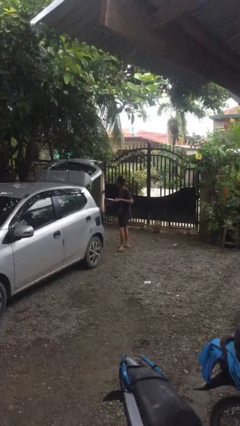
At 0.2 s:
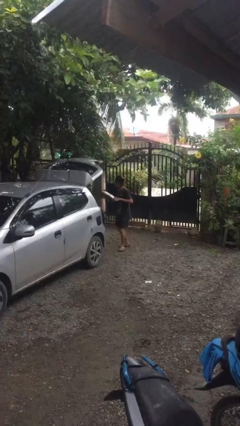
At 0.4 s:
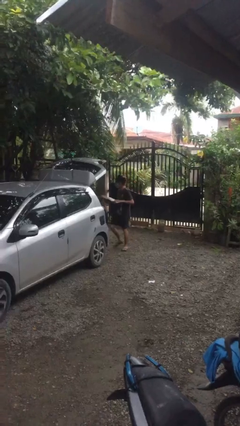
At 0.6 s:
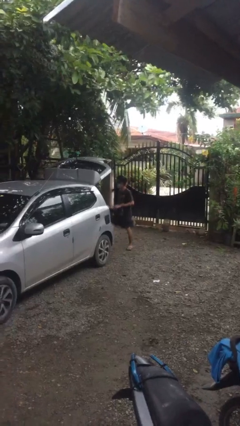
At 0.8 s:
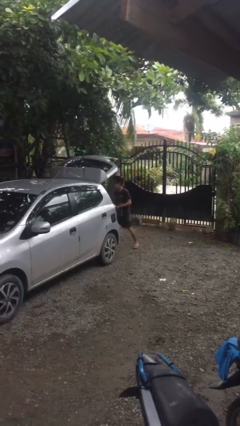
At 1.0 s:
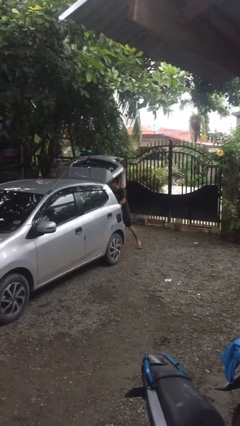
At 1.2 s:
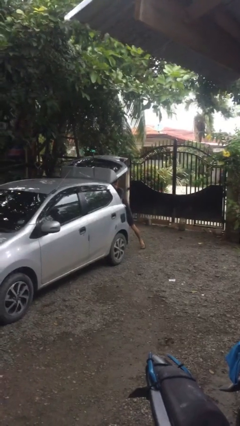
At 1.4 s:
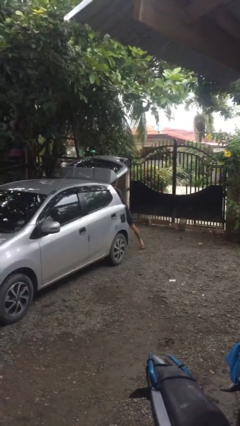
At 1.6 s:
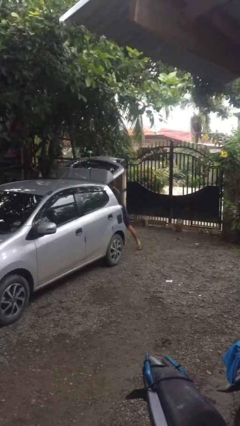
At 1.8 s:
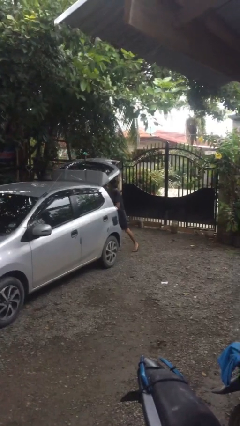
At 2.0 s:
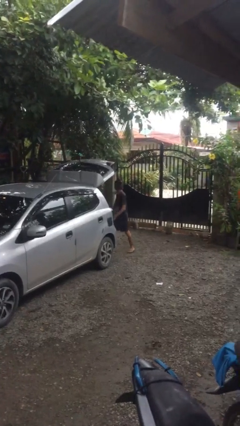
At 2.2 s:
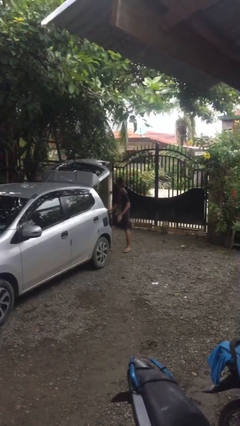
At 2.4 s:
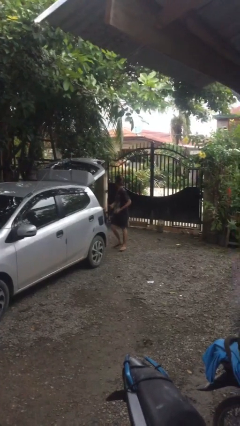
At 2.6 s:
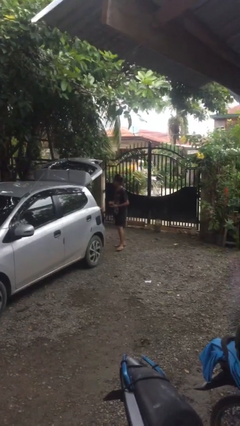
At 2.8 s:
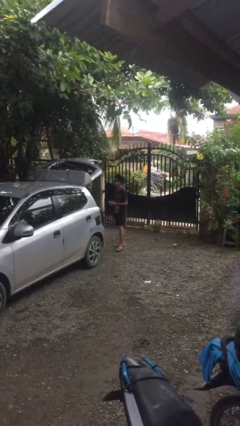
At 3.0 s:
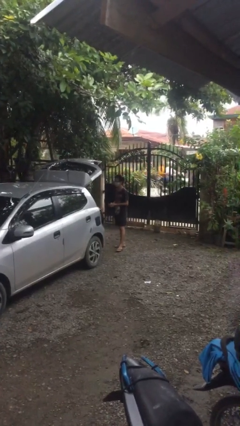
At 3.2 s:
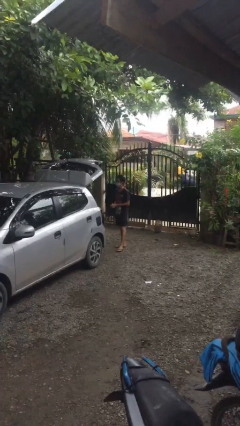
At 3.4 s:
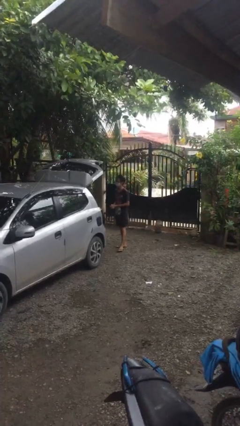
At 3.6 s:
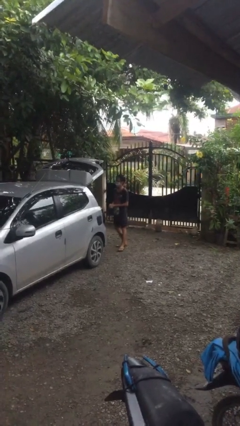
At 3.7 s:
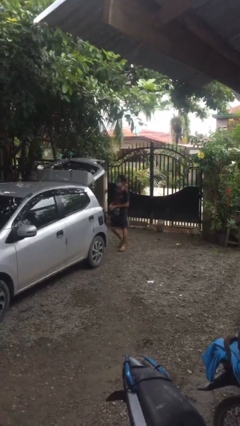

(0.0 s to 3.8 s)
person loads car

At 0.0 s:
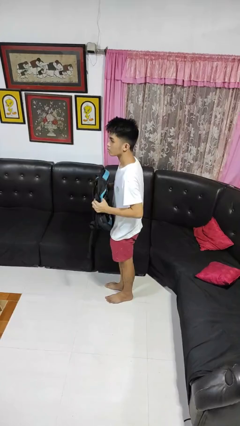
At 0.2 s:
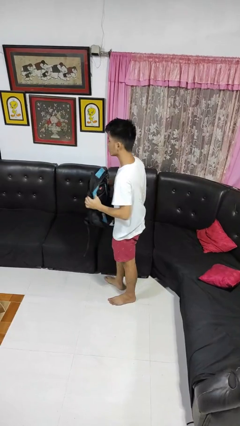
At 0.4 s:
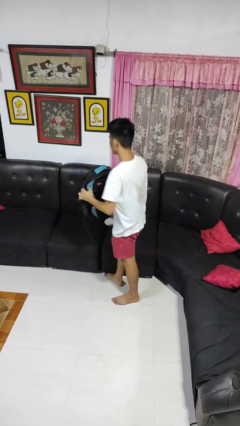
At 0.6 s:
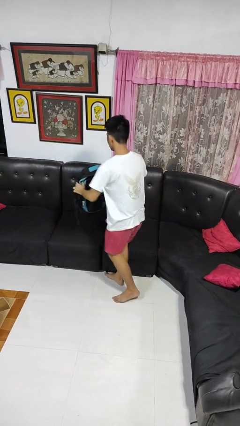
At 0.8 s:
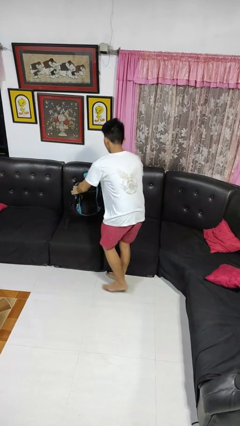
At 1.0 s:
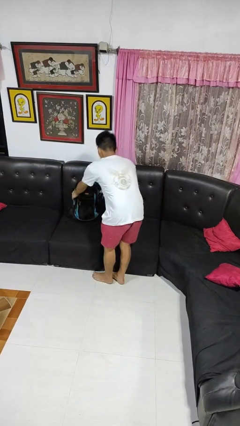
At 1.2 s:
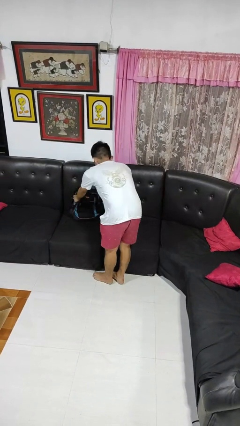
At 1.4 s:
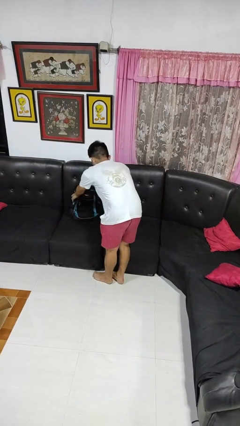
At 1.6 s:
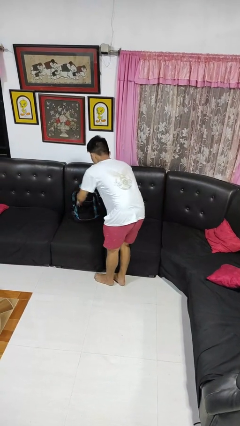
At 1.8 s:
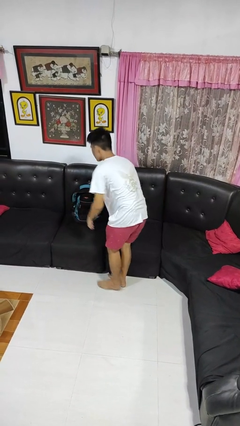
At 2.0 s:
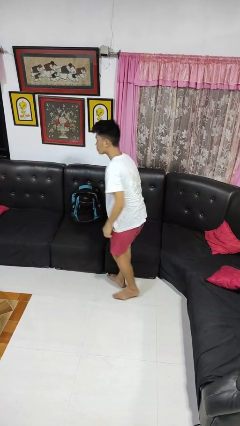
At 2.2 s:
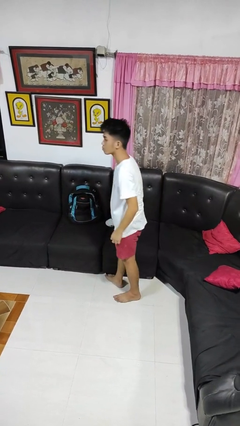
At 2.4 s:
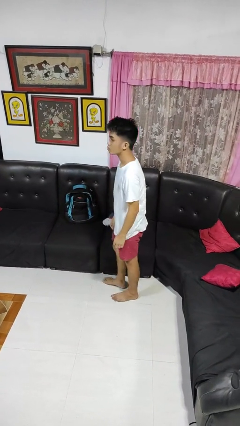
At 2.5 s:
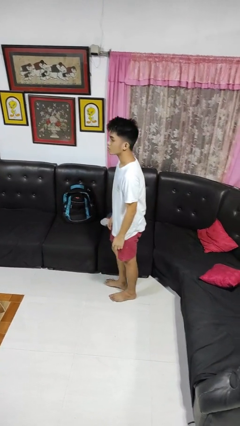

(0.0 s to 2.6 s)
person puts down object on couch

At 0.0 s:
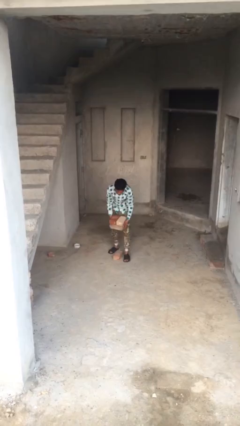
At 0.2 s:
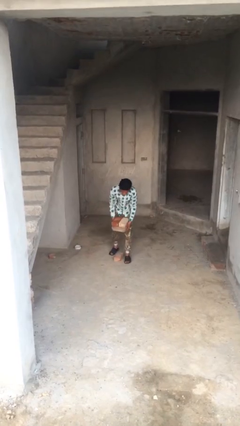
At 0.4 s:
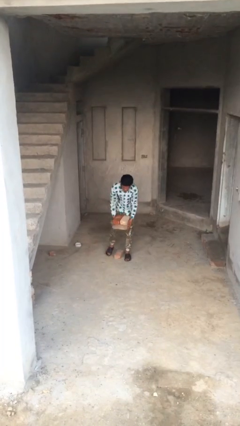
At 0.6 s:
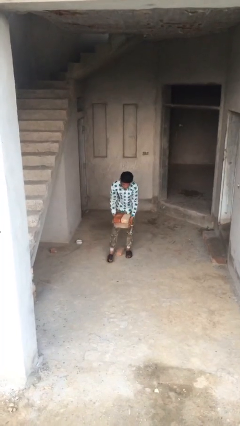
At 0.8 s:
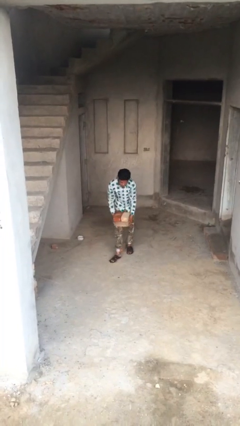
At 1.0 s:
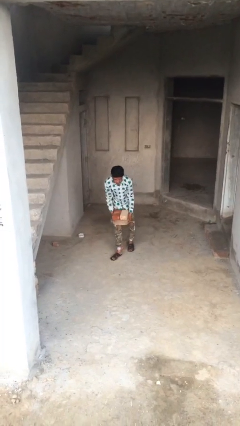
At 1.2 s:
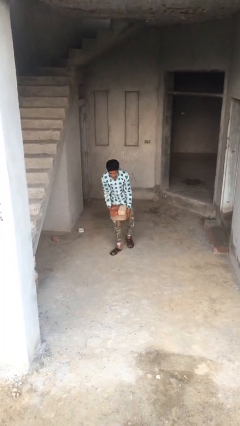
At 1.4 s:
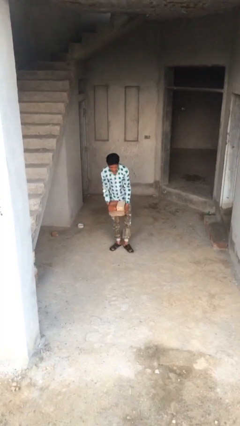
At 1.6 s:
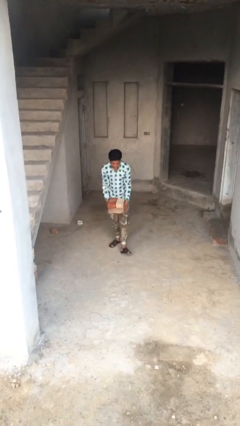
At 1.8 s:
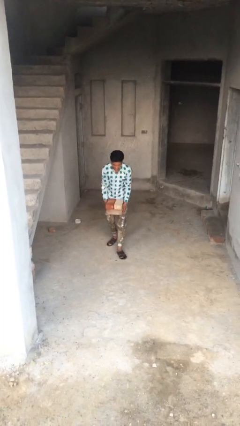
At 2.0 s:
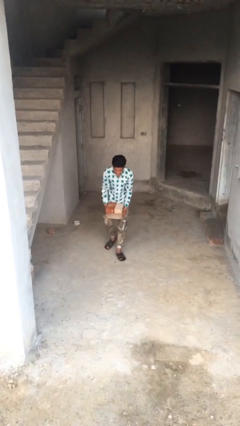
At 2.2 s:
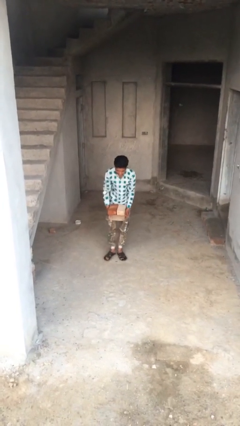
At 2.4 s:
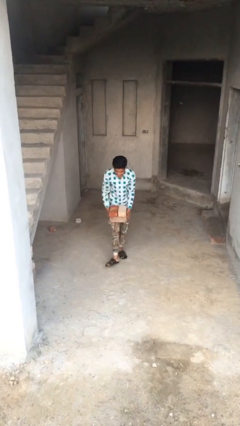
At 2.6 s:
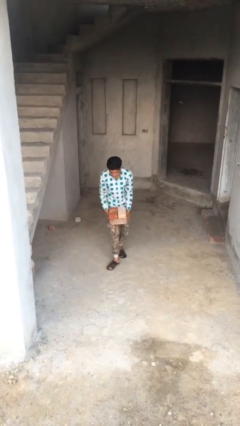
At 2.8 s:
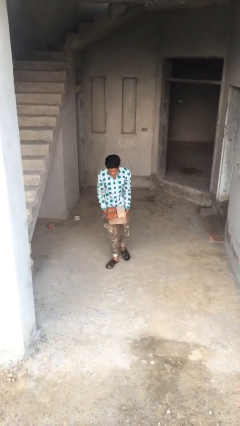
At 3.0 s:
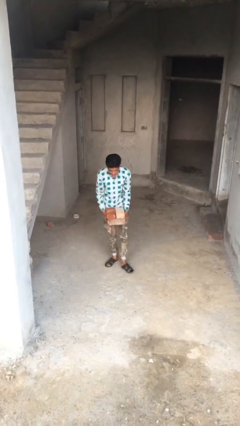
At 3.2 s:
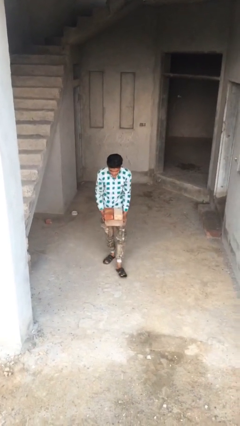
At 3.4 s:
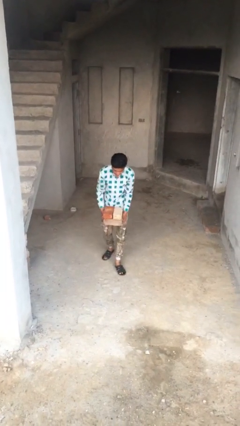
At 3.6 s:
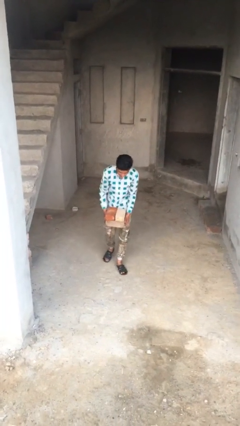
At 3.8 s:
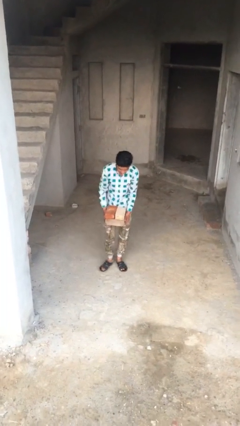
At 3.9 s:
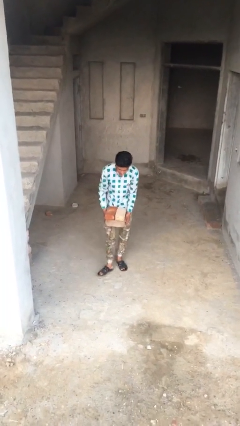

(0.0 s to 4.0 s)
person carries heavy object

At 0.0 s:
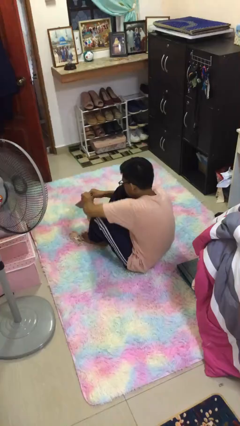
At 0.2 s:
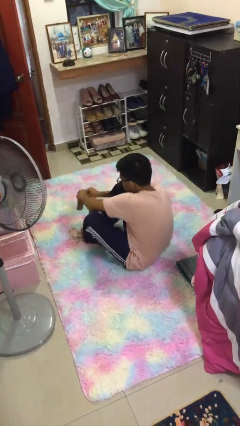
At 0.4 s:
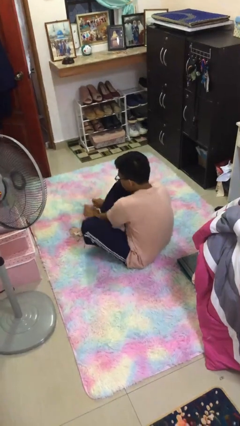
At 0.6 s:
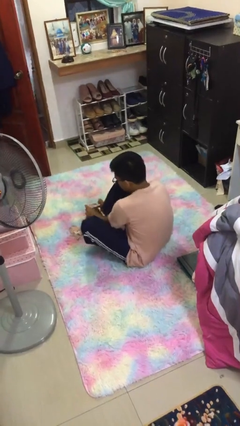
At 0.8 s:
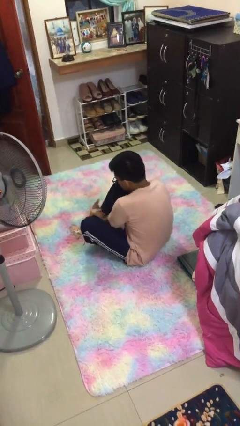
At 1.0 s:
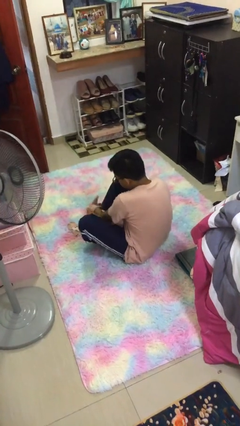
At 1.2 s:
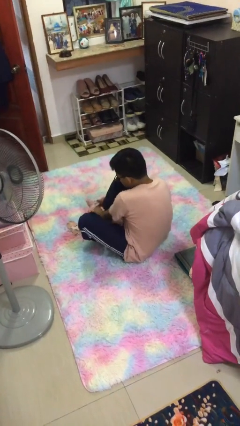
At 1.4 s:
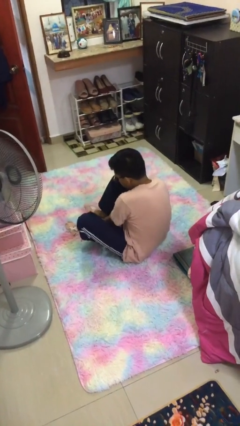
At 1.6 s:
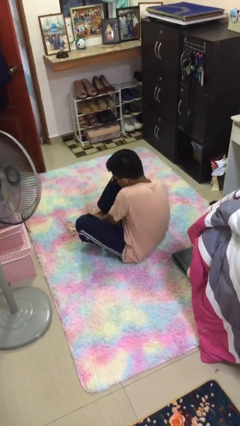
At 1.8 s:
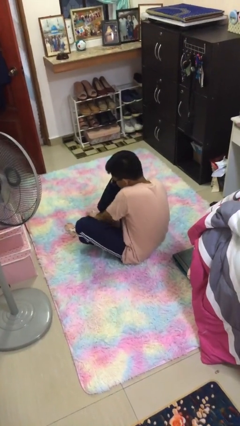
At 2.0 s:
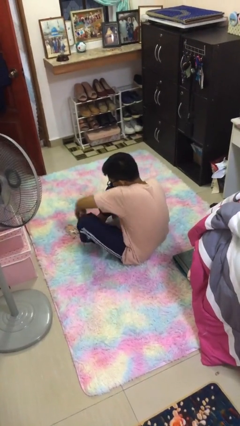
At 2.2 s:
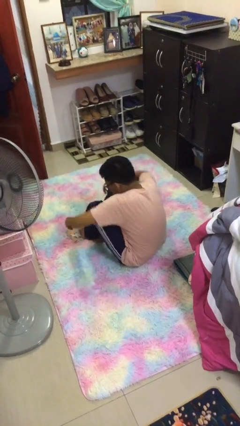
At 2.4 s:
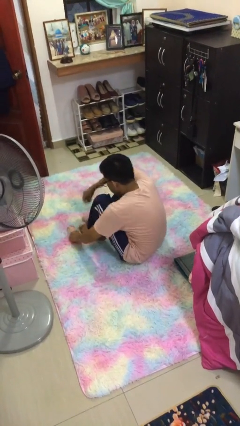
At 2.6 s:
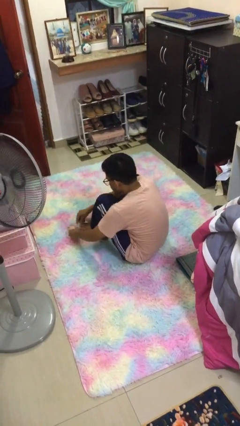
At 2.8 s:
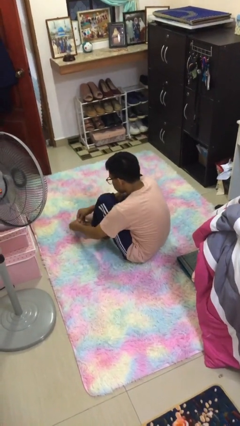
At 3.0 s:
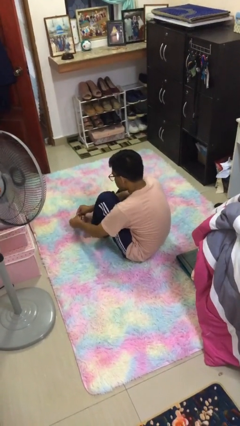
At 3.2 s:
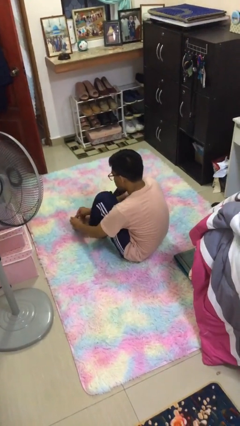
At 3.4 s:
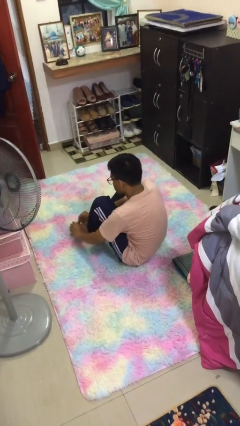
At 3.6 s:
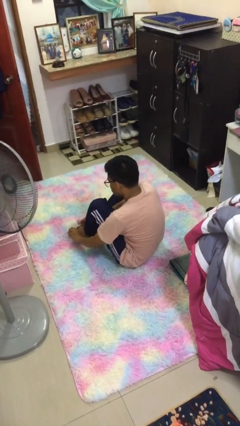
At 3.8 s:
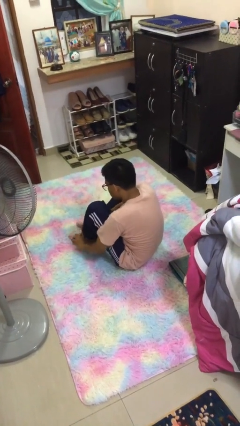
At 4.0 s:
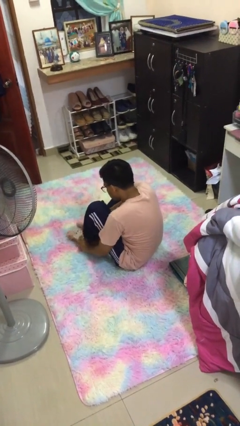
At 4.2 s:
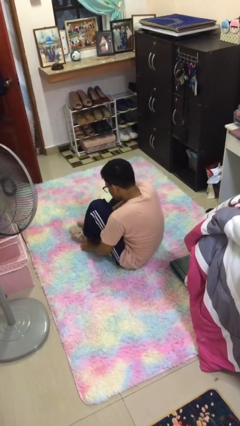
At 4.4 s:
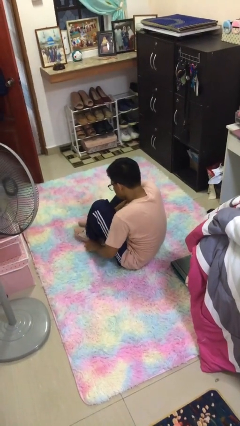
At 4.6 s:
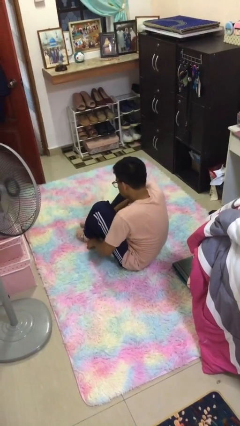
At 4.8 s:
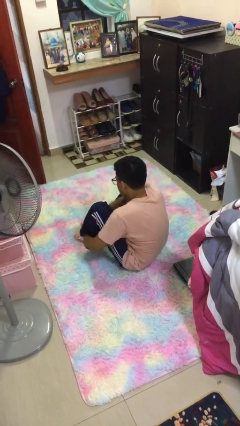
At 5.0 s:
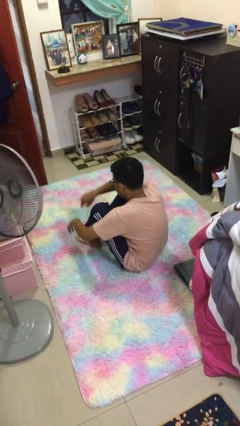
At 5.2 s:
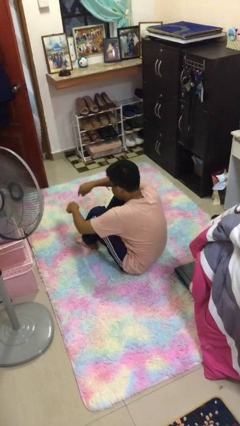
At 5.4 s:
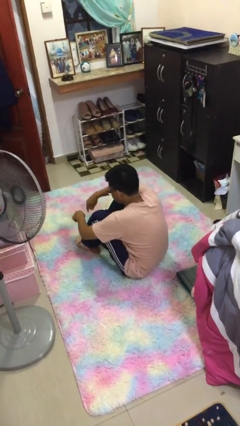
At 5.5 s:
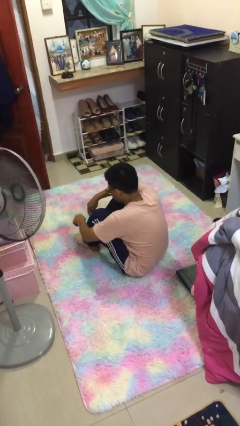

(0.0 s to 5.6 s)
person puts on socks

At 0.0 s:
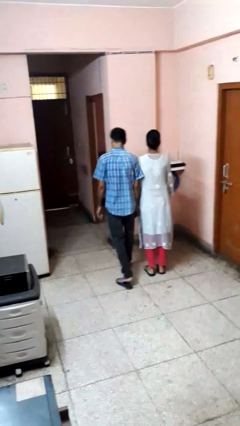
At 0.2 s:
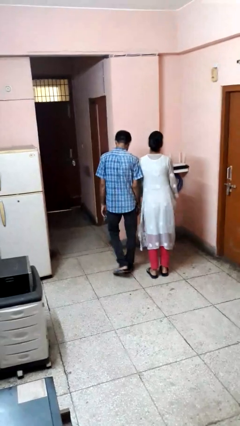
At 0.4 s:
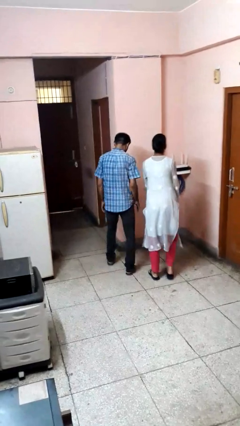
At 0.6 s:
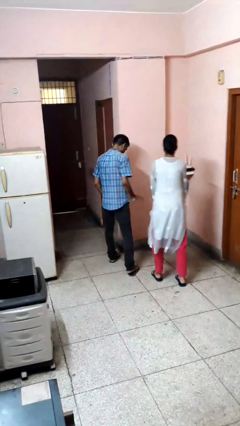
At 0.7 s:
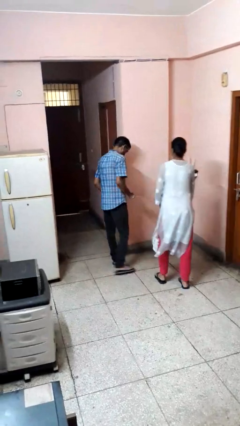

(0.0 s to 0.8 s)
person bumps into person

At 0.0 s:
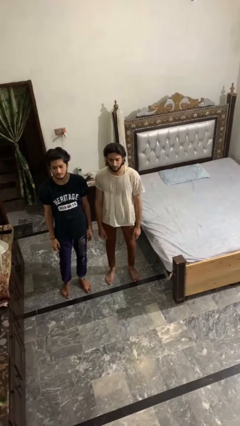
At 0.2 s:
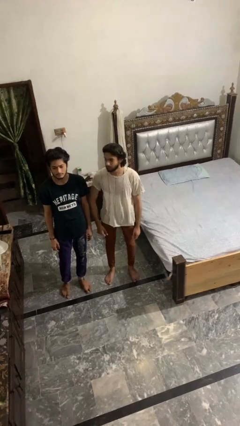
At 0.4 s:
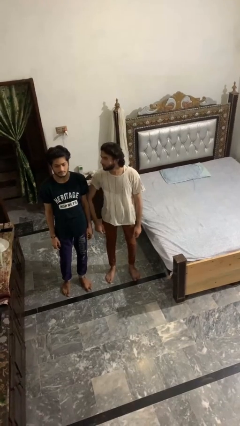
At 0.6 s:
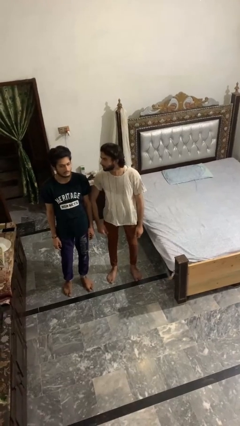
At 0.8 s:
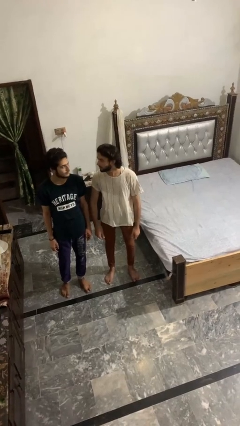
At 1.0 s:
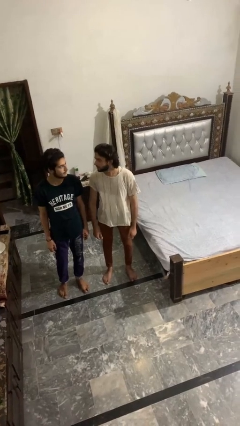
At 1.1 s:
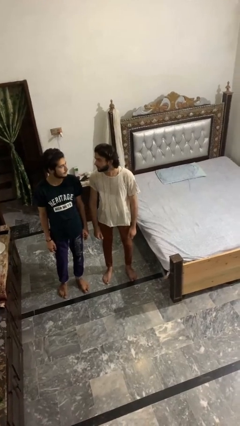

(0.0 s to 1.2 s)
person nudges person with elbow
